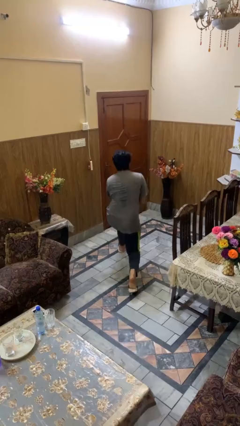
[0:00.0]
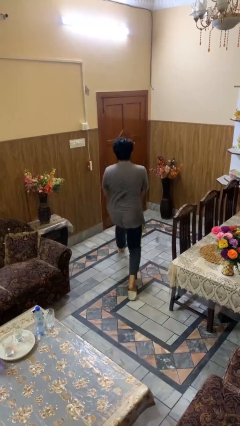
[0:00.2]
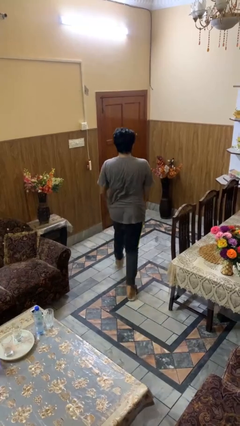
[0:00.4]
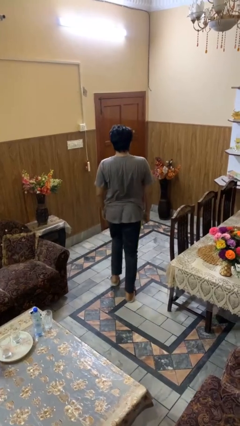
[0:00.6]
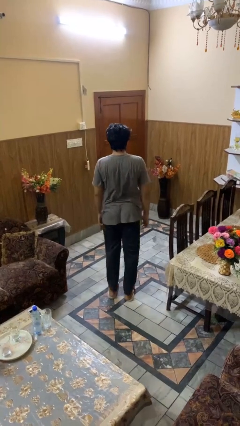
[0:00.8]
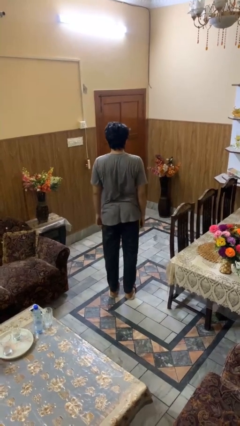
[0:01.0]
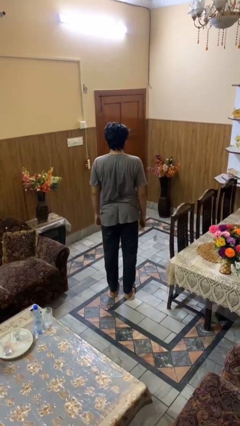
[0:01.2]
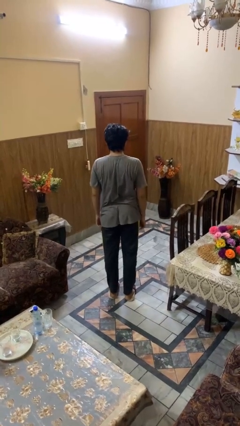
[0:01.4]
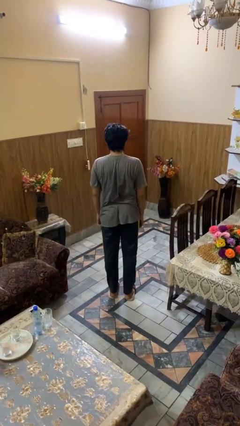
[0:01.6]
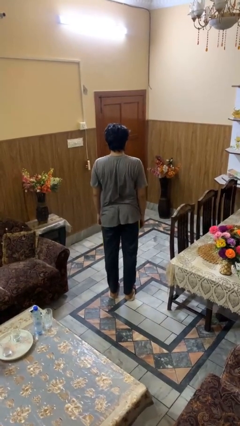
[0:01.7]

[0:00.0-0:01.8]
person stands up from floor

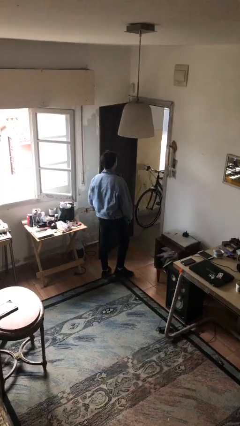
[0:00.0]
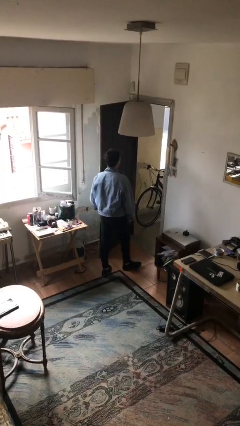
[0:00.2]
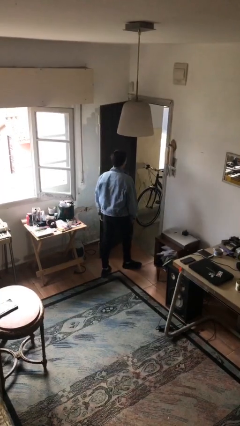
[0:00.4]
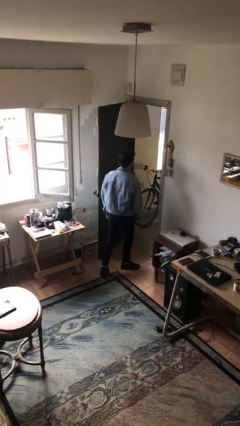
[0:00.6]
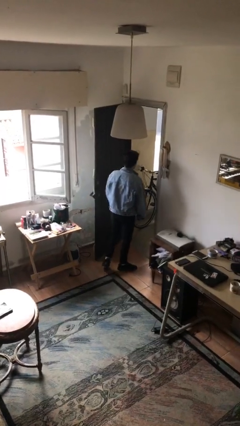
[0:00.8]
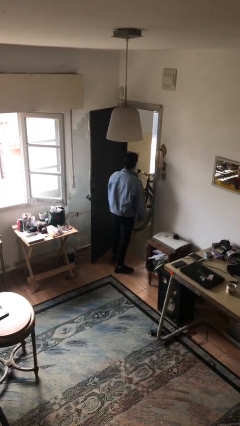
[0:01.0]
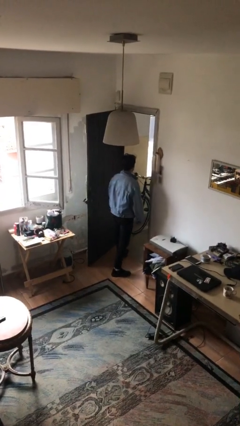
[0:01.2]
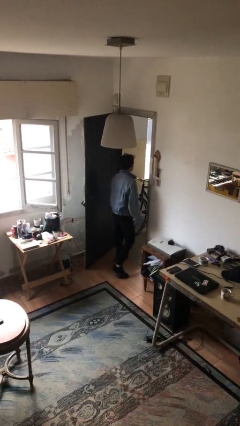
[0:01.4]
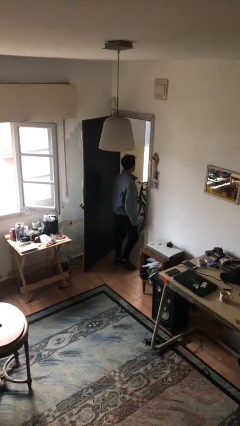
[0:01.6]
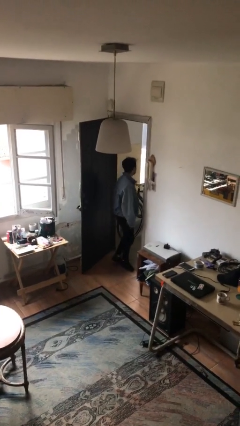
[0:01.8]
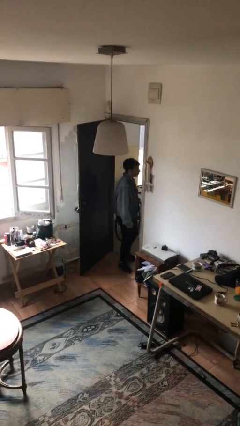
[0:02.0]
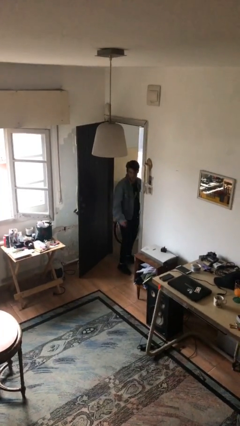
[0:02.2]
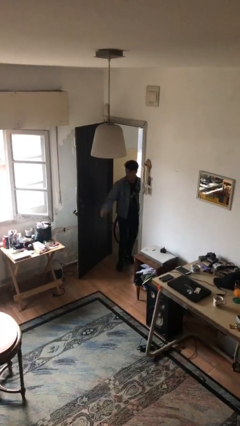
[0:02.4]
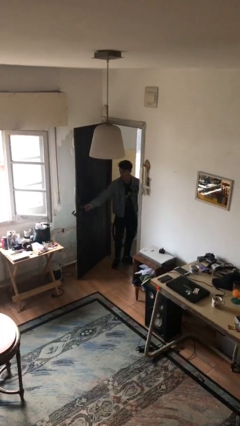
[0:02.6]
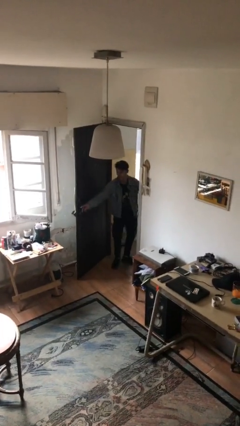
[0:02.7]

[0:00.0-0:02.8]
person exits scene through structure

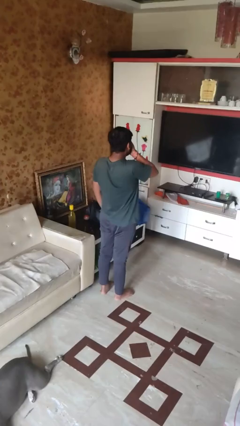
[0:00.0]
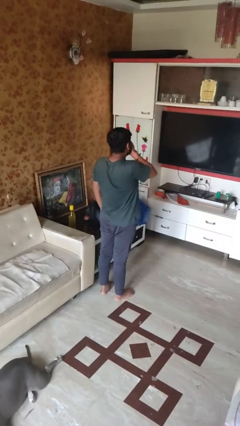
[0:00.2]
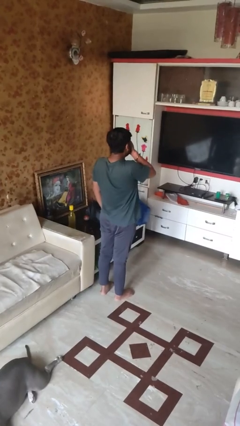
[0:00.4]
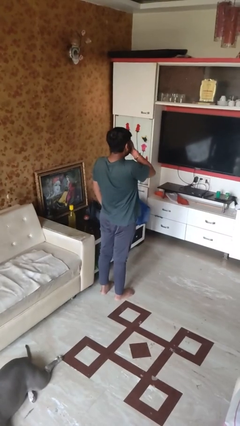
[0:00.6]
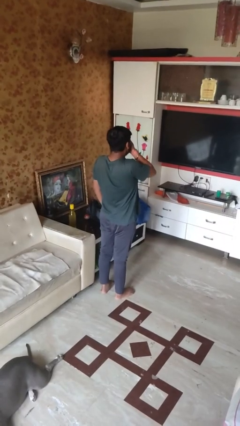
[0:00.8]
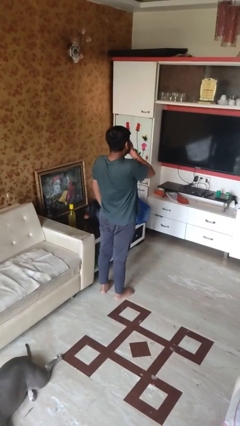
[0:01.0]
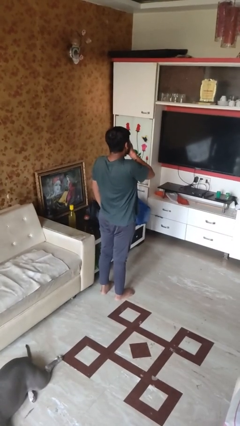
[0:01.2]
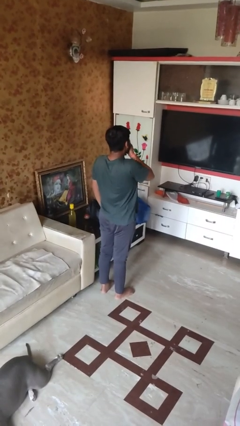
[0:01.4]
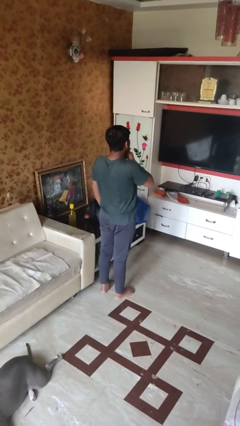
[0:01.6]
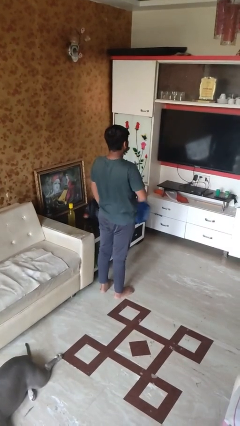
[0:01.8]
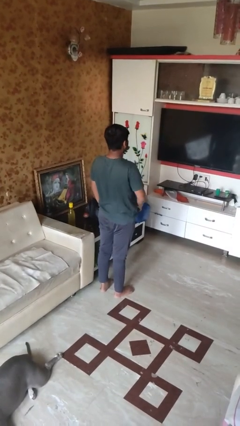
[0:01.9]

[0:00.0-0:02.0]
person yawns

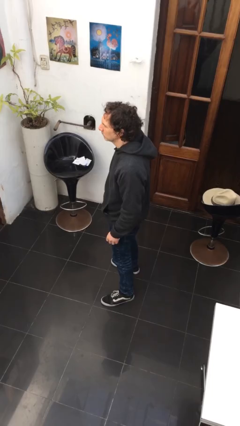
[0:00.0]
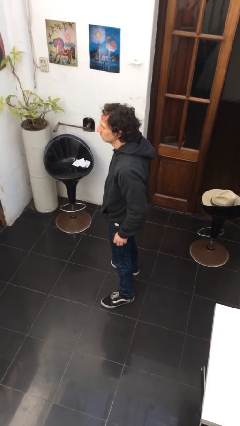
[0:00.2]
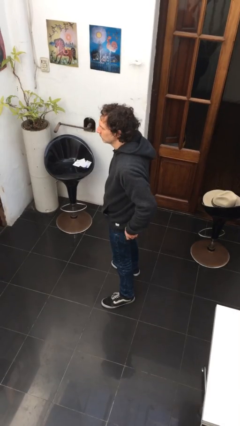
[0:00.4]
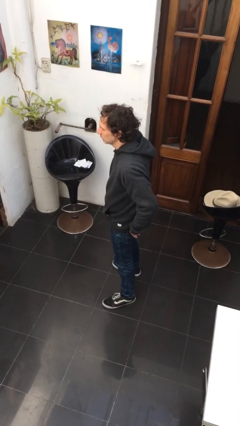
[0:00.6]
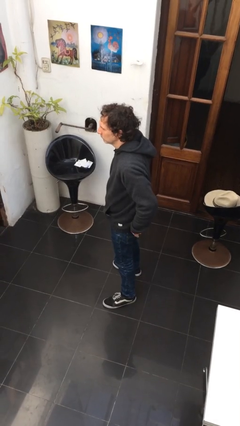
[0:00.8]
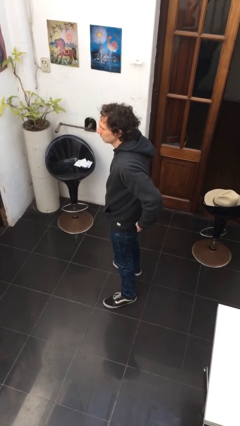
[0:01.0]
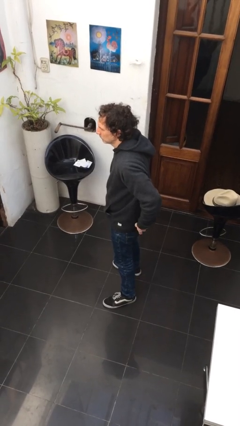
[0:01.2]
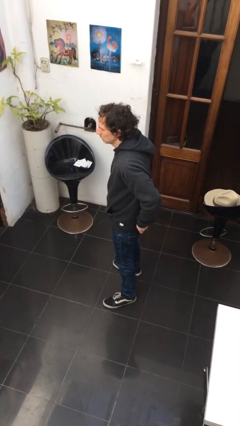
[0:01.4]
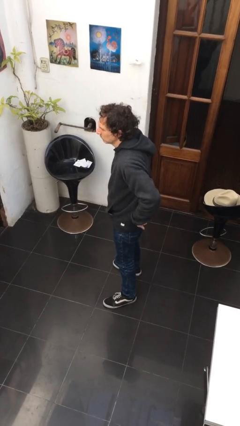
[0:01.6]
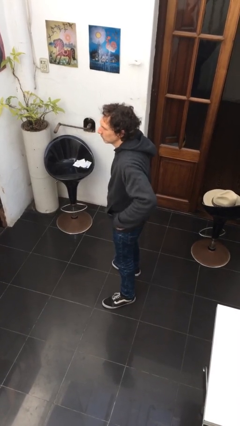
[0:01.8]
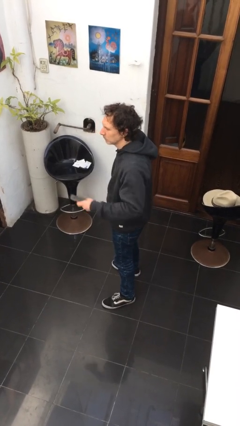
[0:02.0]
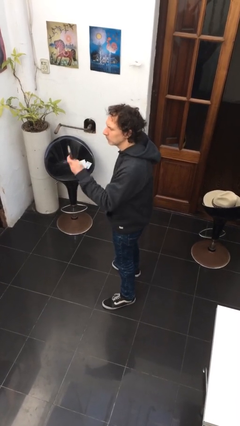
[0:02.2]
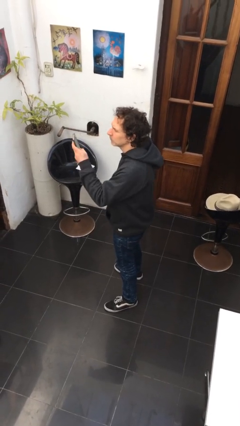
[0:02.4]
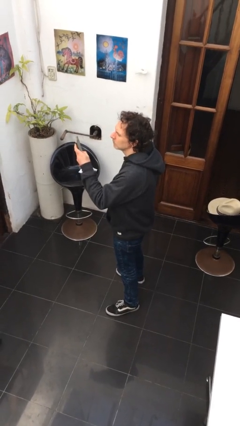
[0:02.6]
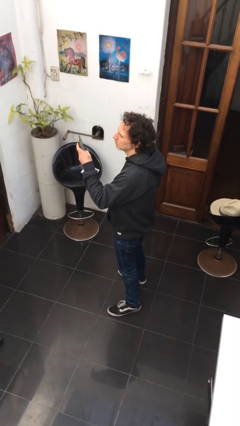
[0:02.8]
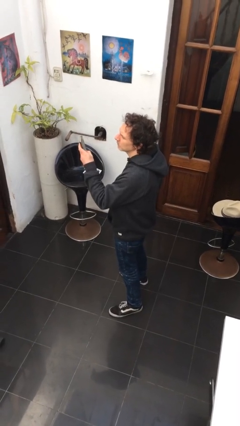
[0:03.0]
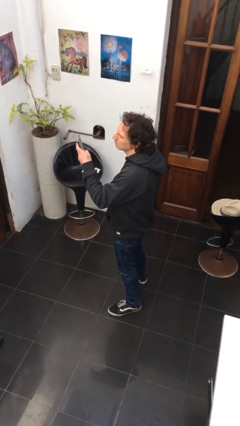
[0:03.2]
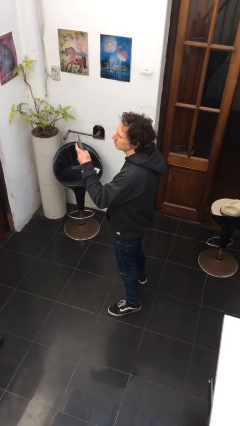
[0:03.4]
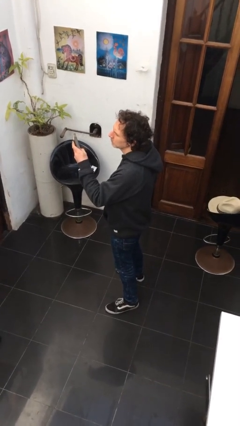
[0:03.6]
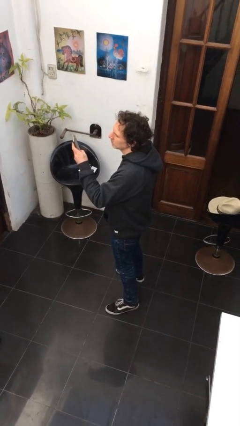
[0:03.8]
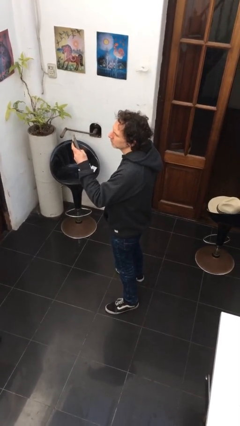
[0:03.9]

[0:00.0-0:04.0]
person takes phone from pocket

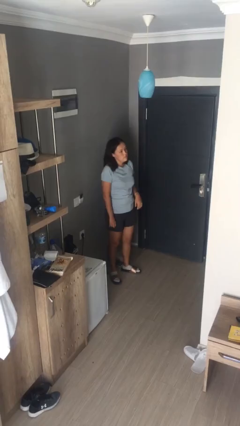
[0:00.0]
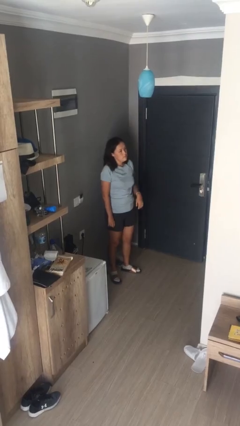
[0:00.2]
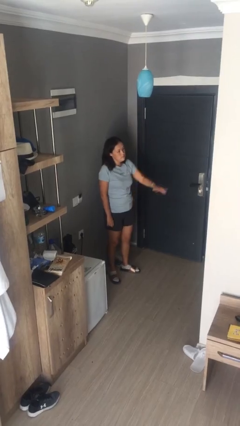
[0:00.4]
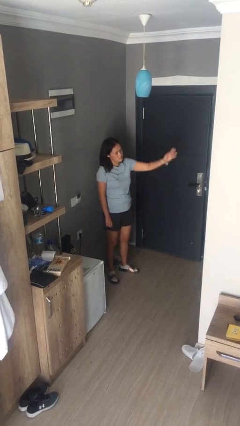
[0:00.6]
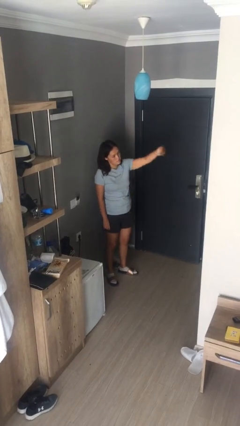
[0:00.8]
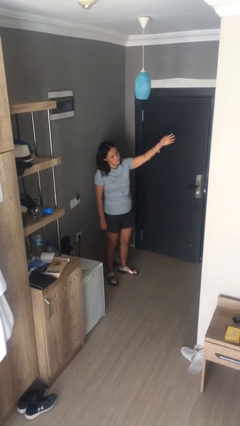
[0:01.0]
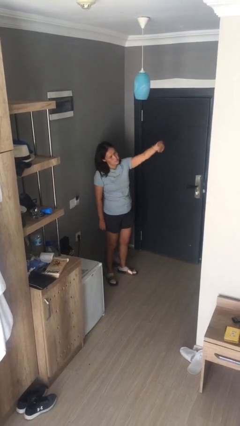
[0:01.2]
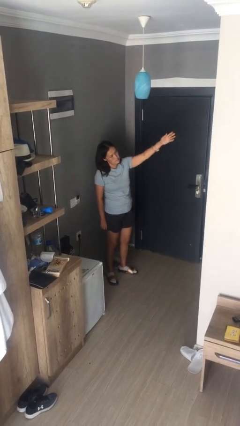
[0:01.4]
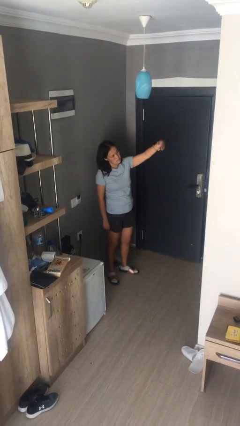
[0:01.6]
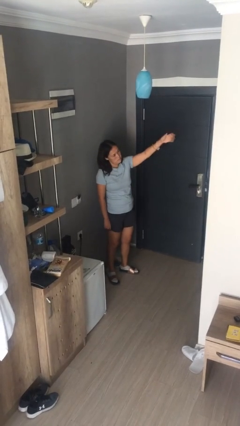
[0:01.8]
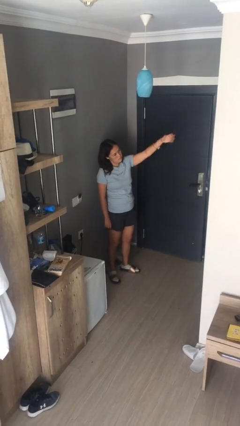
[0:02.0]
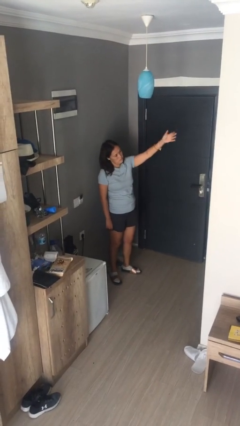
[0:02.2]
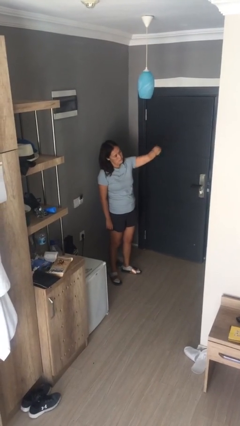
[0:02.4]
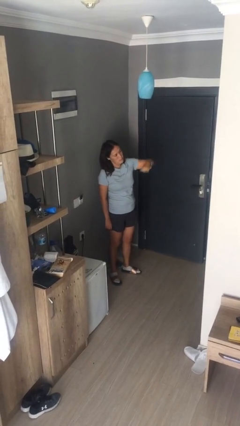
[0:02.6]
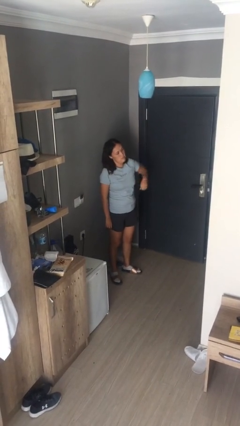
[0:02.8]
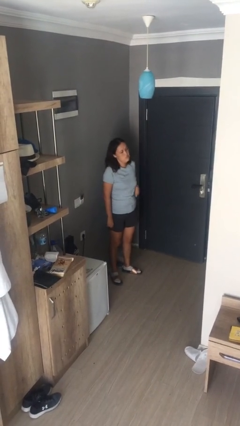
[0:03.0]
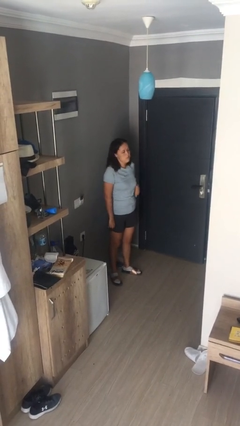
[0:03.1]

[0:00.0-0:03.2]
person gestures come here

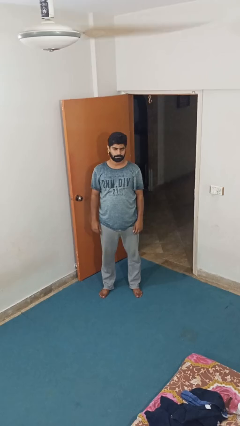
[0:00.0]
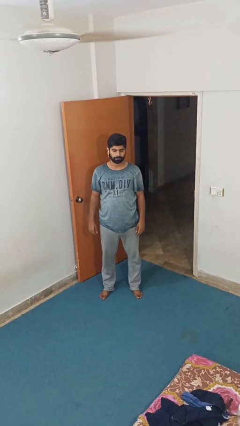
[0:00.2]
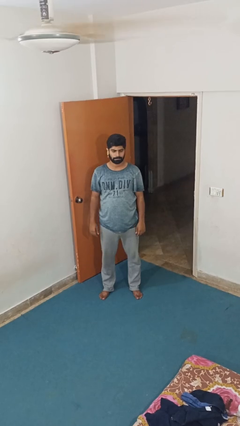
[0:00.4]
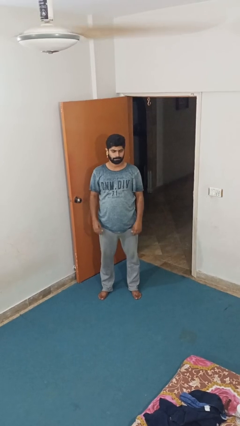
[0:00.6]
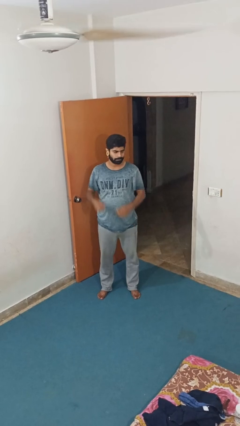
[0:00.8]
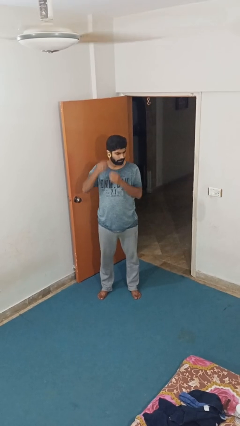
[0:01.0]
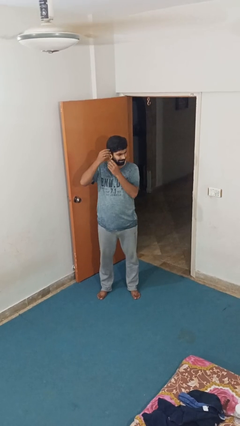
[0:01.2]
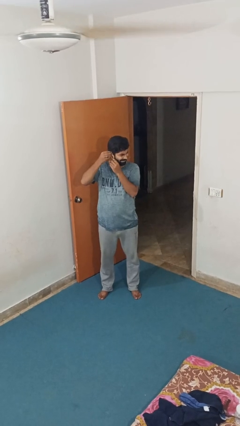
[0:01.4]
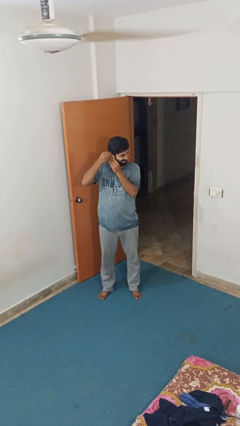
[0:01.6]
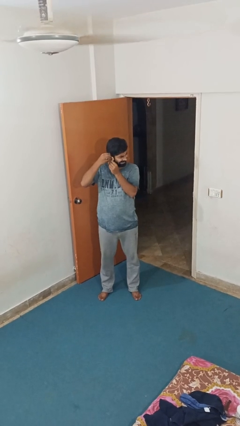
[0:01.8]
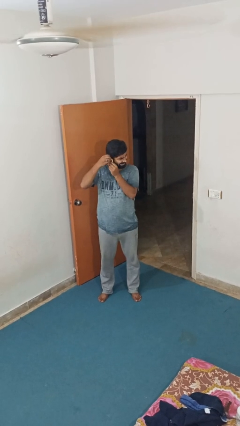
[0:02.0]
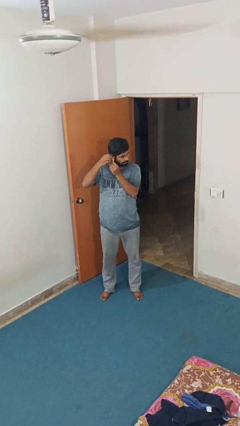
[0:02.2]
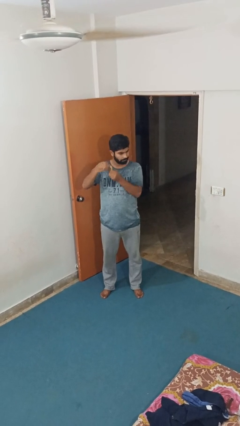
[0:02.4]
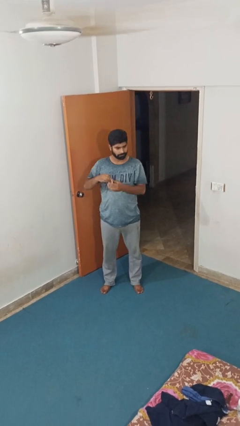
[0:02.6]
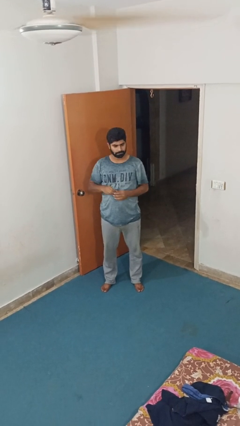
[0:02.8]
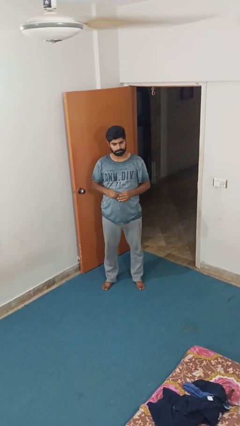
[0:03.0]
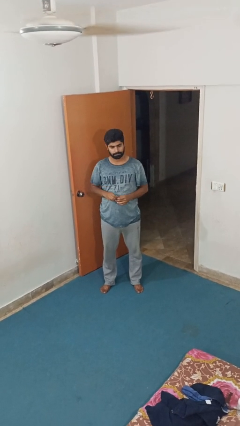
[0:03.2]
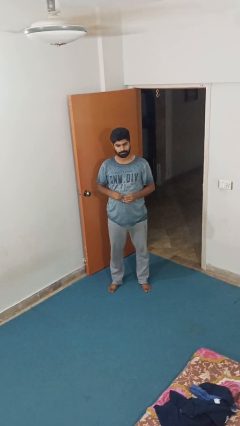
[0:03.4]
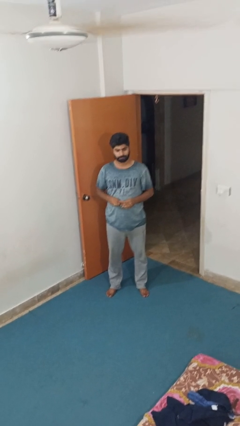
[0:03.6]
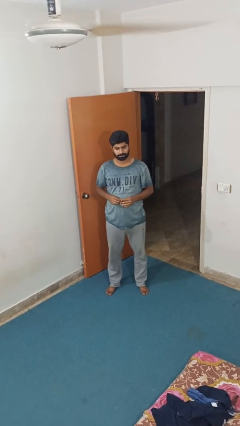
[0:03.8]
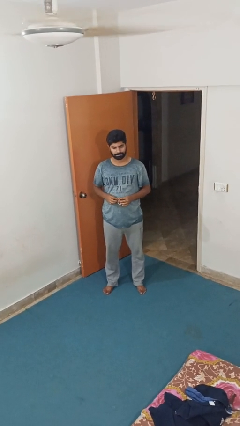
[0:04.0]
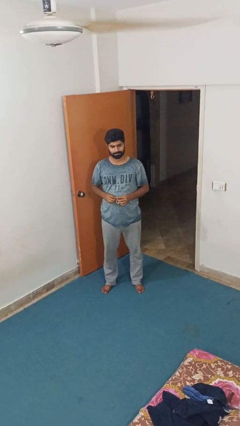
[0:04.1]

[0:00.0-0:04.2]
person takes off earrings
